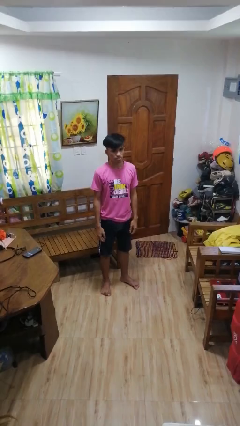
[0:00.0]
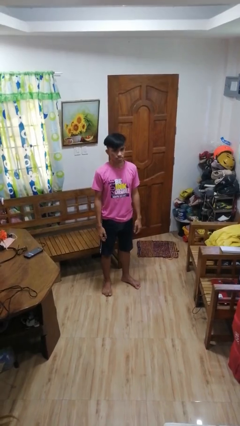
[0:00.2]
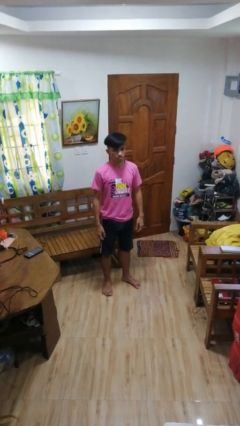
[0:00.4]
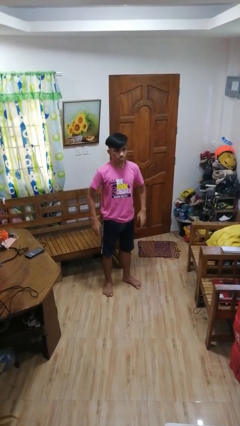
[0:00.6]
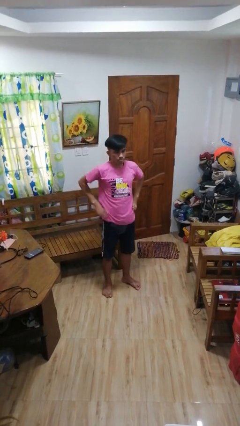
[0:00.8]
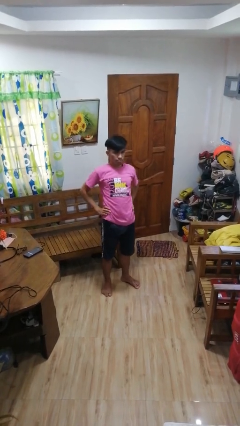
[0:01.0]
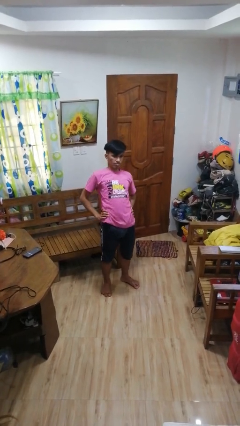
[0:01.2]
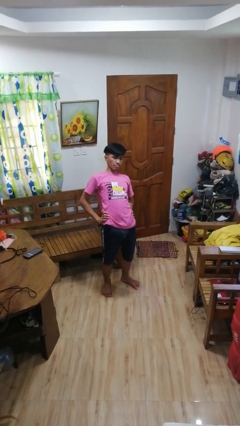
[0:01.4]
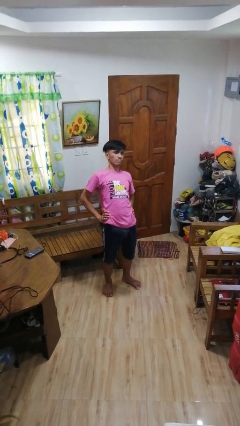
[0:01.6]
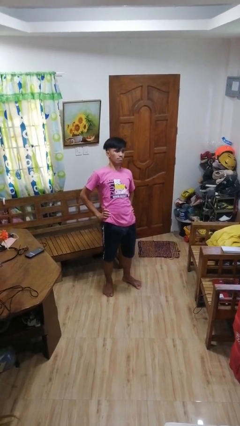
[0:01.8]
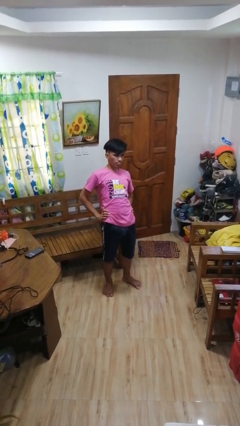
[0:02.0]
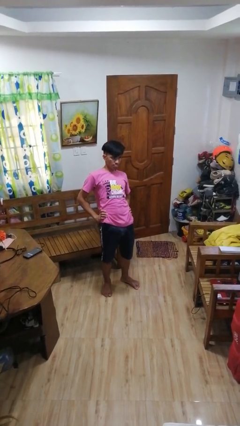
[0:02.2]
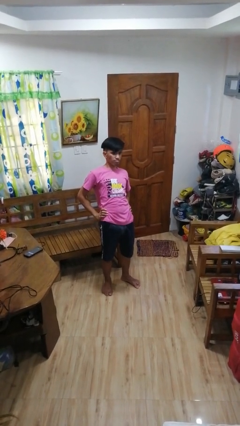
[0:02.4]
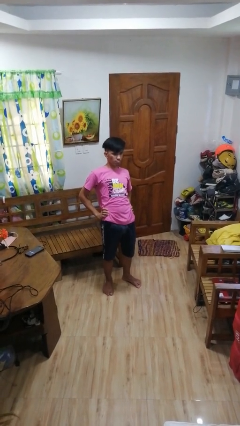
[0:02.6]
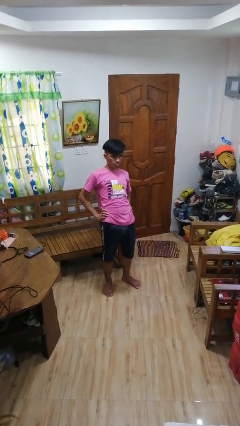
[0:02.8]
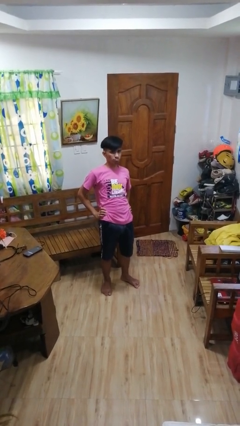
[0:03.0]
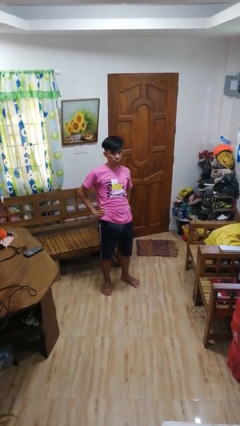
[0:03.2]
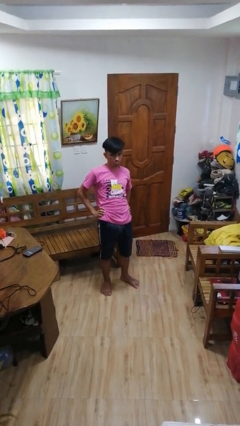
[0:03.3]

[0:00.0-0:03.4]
person stretches back

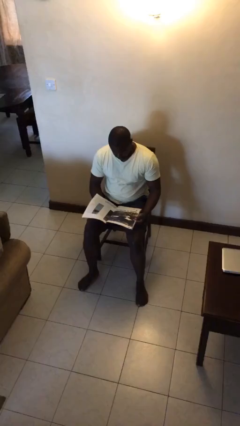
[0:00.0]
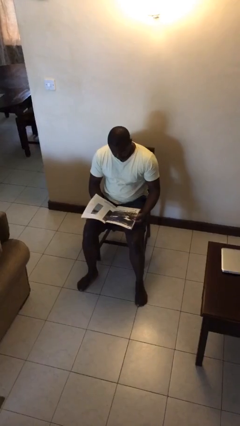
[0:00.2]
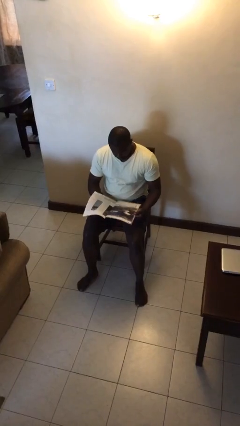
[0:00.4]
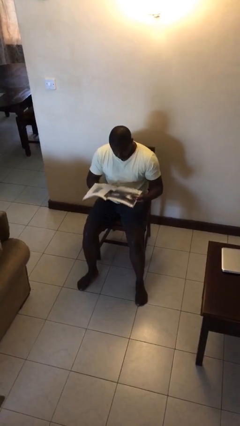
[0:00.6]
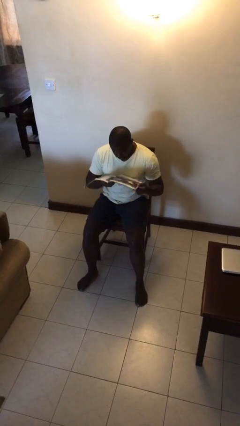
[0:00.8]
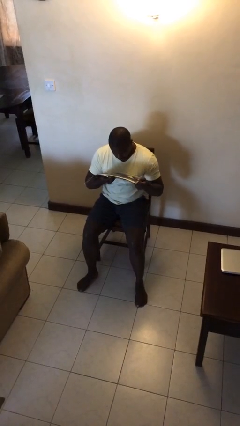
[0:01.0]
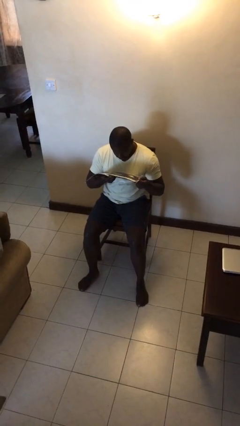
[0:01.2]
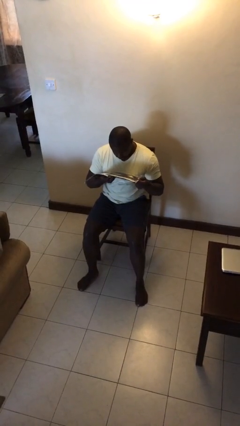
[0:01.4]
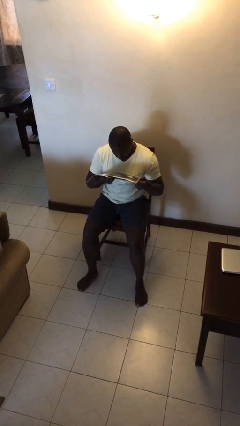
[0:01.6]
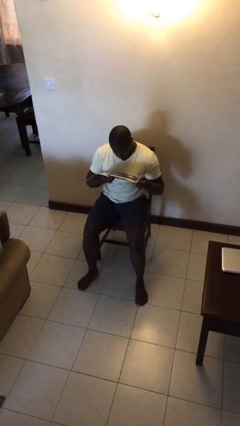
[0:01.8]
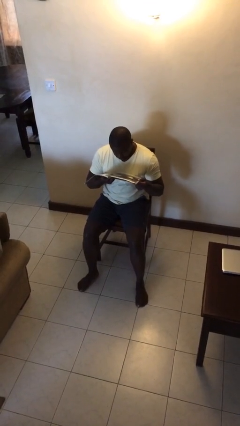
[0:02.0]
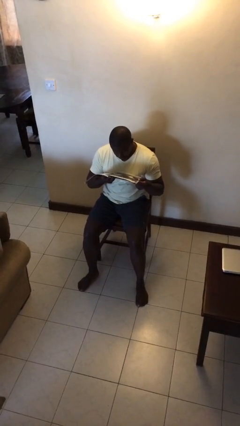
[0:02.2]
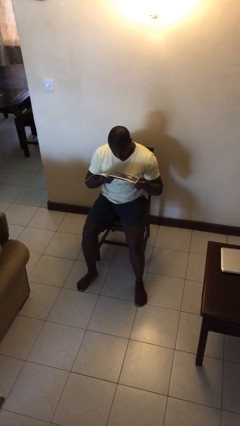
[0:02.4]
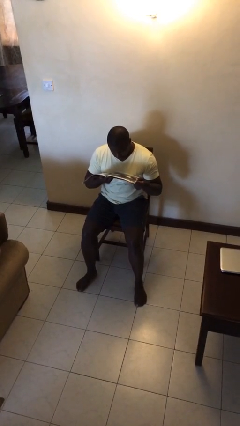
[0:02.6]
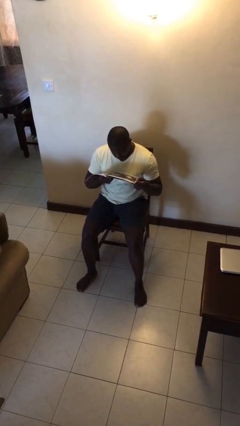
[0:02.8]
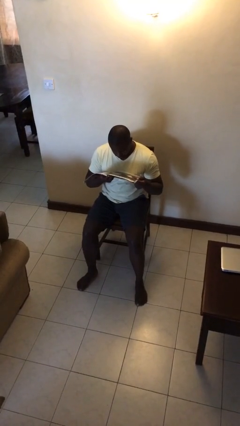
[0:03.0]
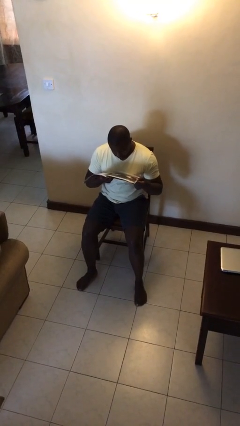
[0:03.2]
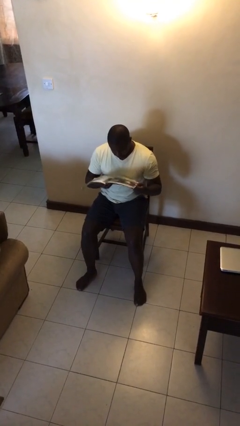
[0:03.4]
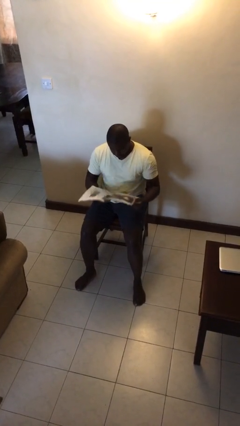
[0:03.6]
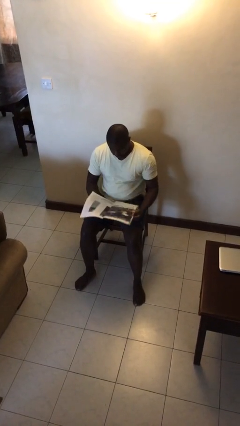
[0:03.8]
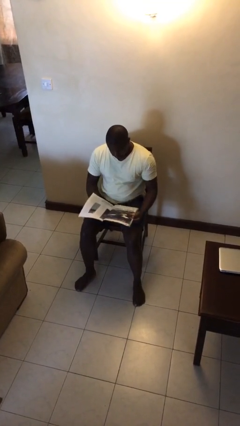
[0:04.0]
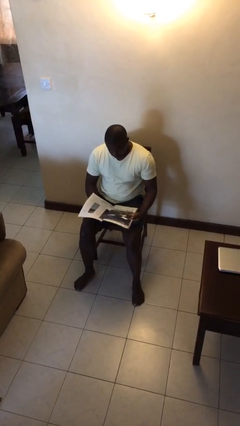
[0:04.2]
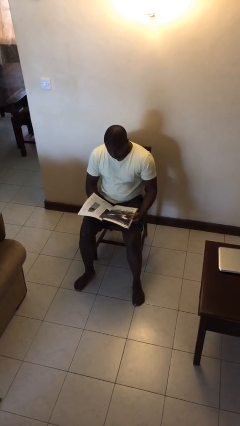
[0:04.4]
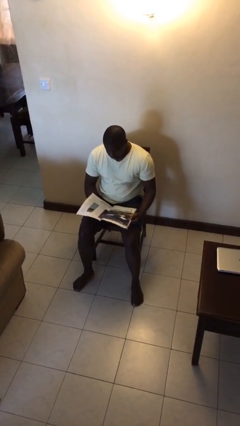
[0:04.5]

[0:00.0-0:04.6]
person reads document

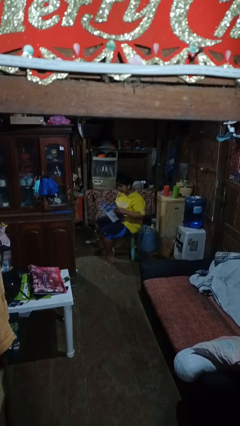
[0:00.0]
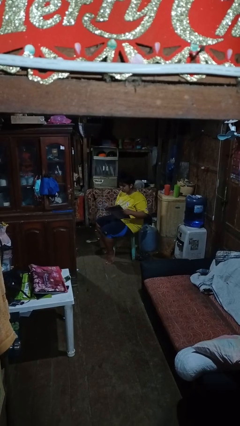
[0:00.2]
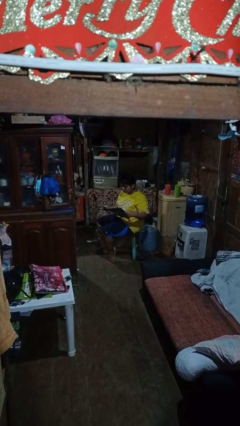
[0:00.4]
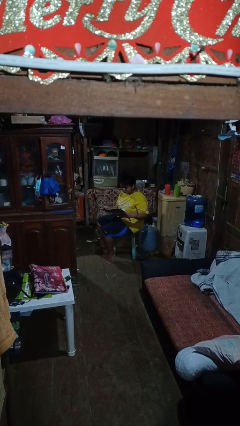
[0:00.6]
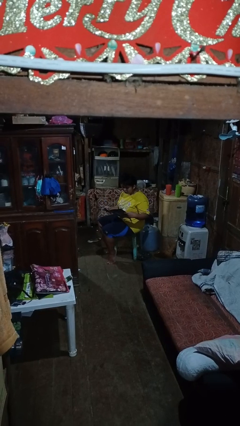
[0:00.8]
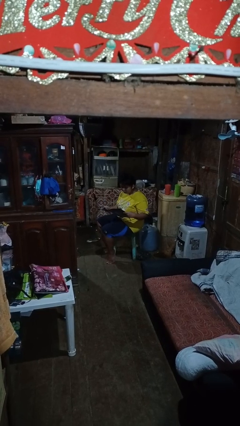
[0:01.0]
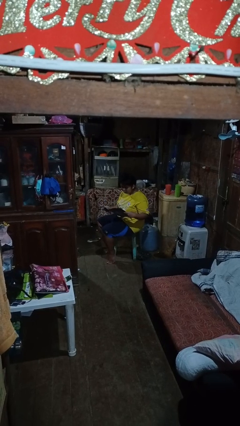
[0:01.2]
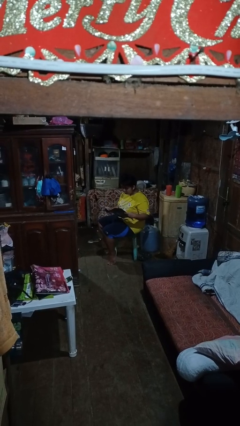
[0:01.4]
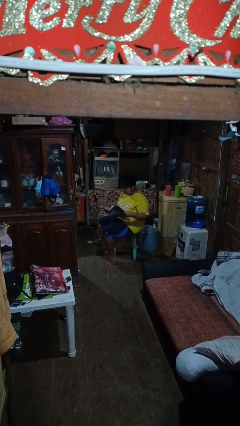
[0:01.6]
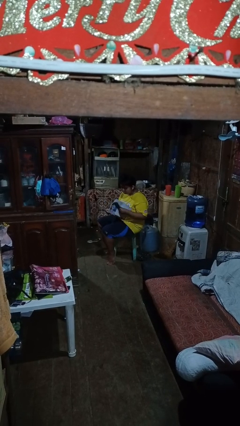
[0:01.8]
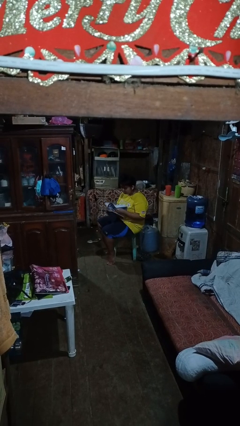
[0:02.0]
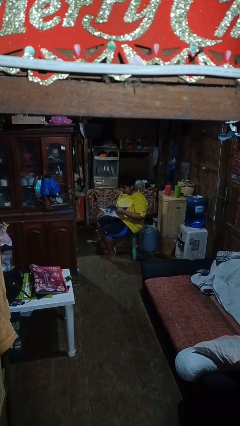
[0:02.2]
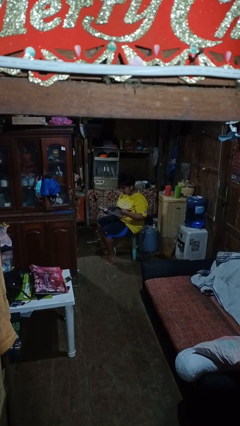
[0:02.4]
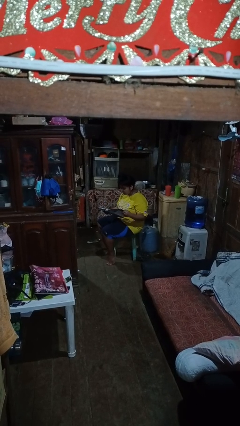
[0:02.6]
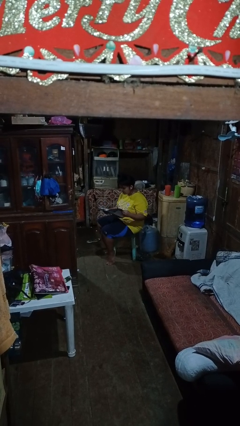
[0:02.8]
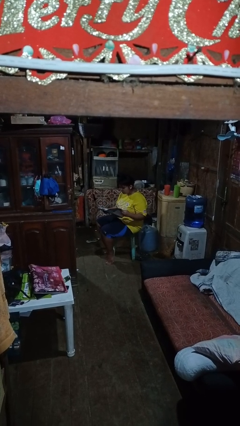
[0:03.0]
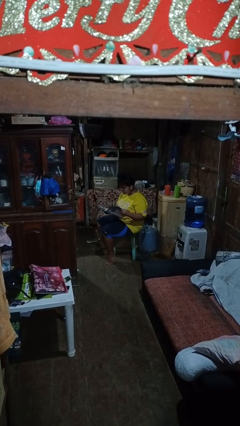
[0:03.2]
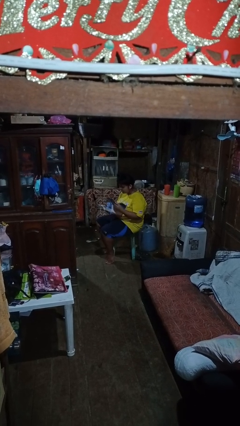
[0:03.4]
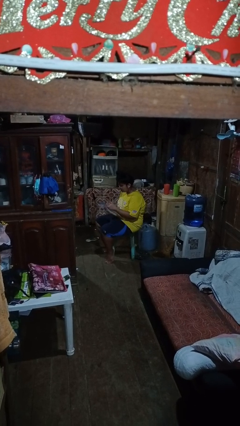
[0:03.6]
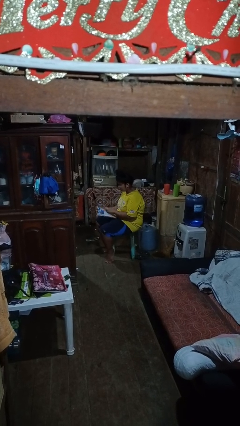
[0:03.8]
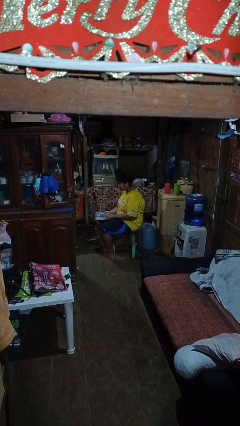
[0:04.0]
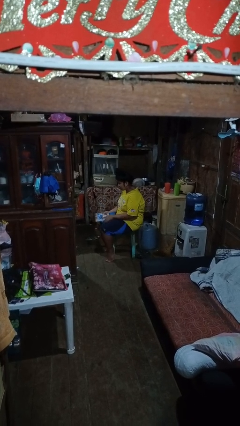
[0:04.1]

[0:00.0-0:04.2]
person reads magazine

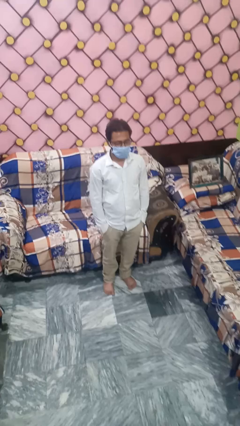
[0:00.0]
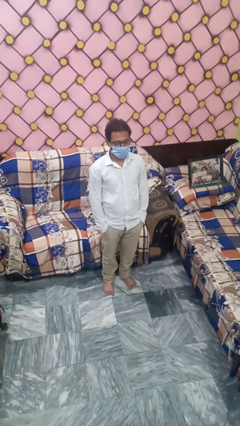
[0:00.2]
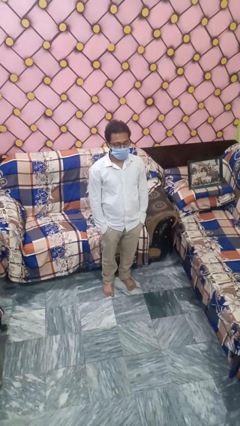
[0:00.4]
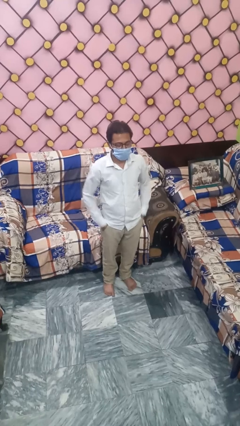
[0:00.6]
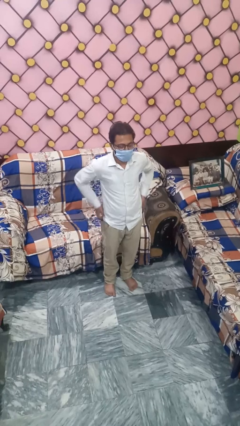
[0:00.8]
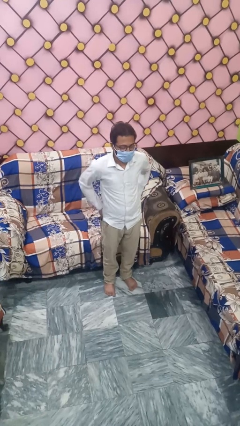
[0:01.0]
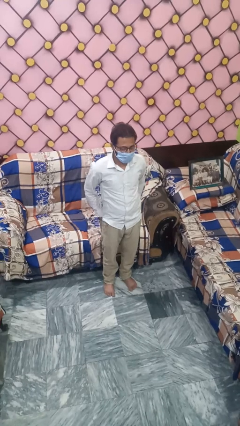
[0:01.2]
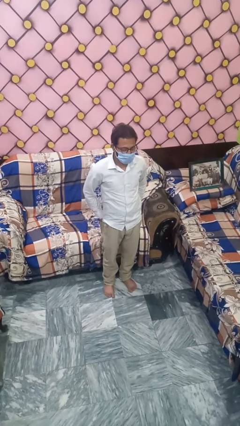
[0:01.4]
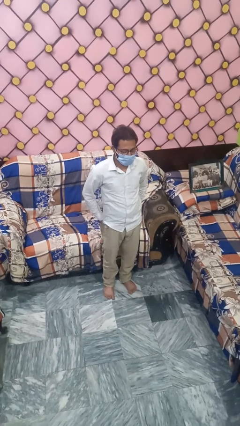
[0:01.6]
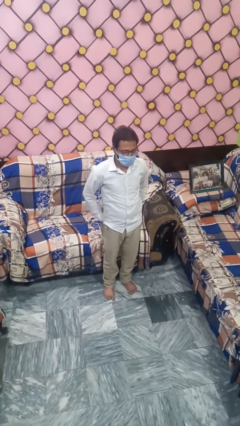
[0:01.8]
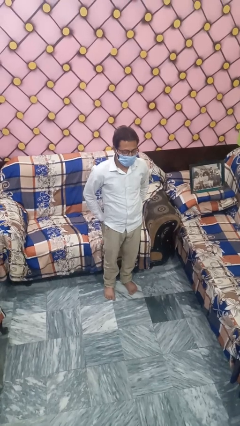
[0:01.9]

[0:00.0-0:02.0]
person puts hands in back pockets

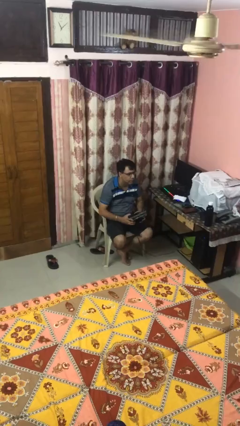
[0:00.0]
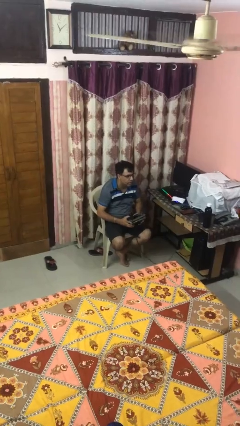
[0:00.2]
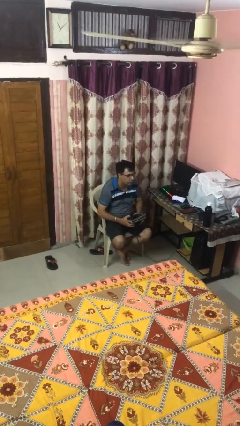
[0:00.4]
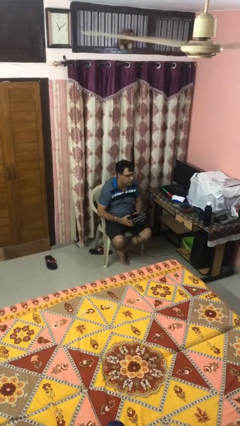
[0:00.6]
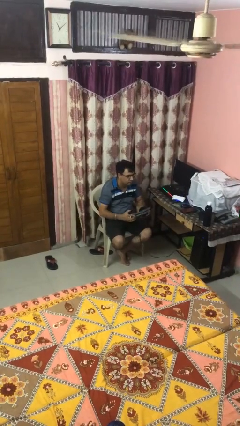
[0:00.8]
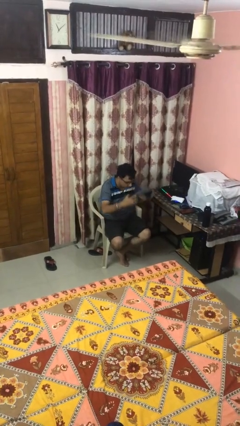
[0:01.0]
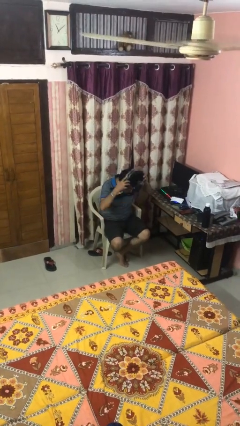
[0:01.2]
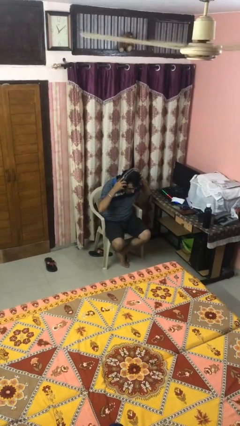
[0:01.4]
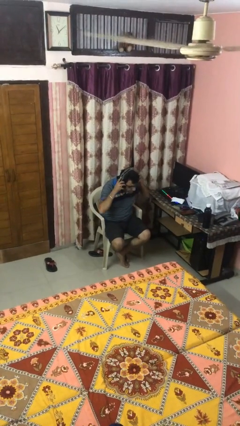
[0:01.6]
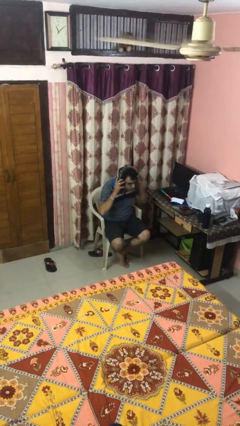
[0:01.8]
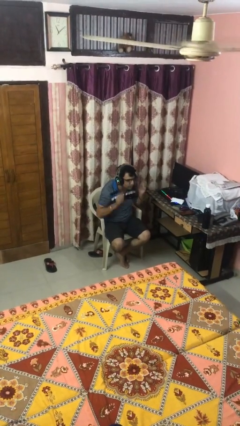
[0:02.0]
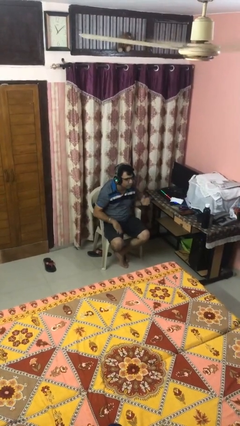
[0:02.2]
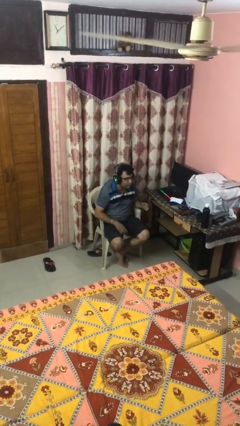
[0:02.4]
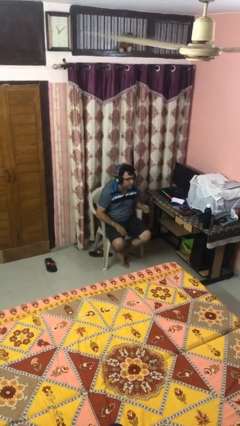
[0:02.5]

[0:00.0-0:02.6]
person puts on headphones

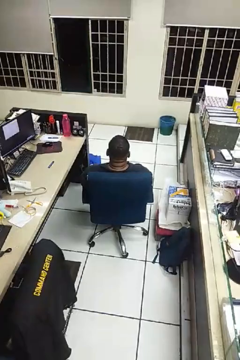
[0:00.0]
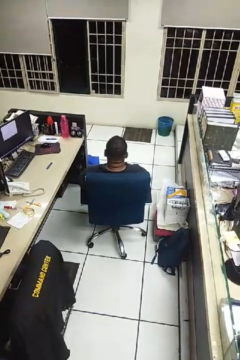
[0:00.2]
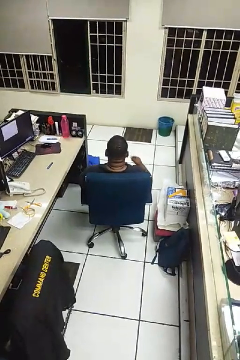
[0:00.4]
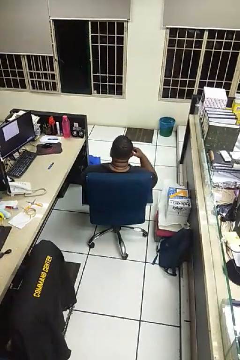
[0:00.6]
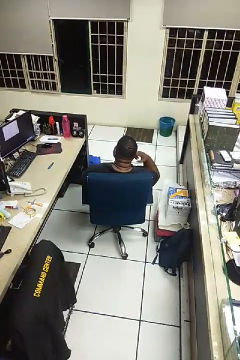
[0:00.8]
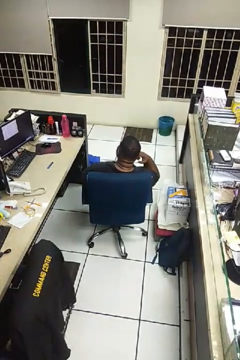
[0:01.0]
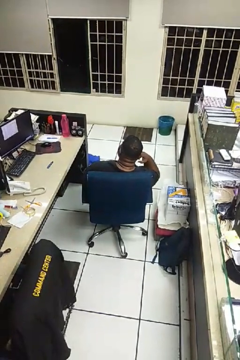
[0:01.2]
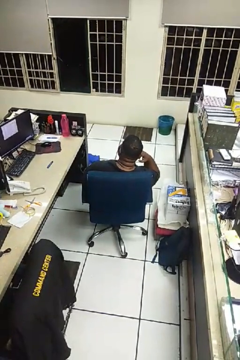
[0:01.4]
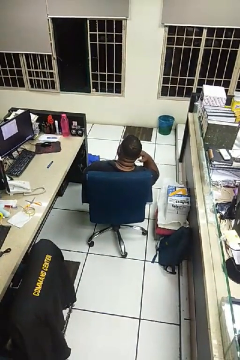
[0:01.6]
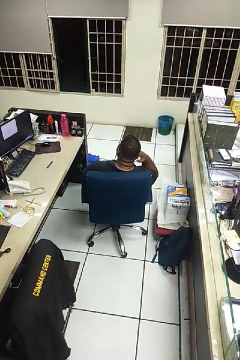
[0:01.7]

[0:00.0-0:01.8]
person gestures listen closely
